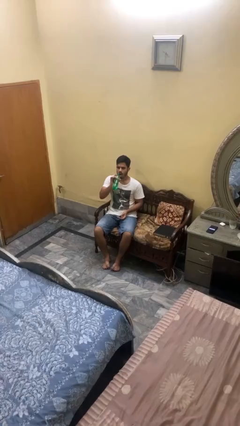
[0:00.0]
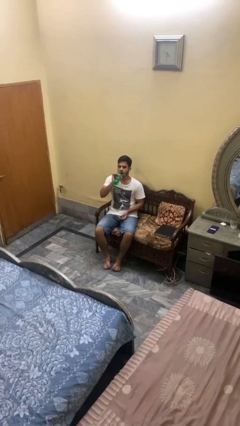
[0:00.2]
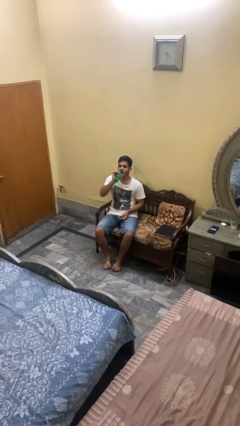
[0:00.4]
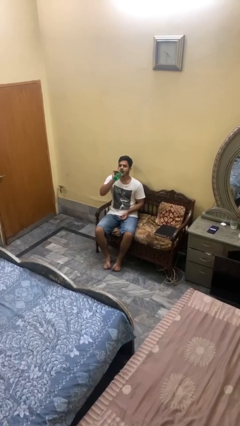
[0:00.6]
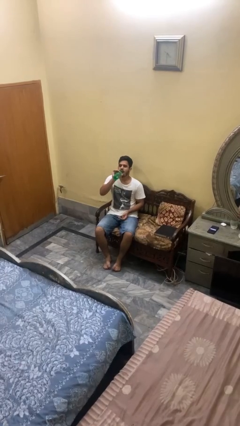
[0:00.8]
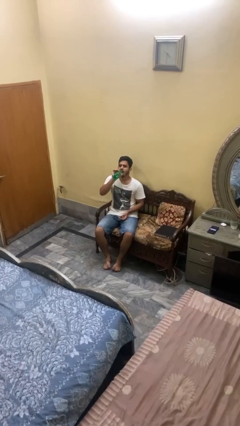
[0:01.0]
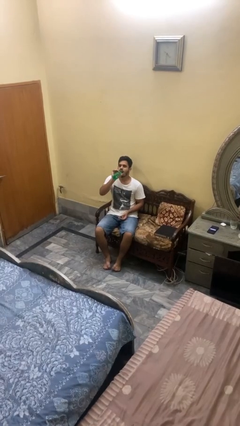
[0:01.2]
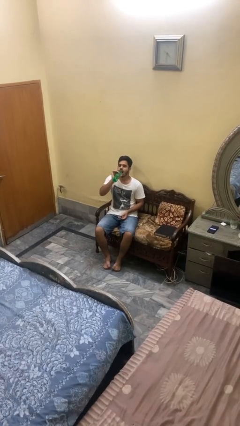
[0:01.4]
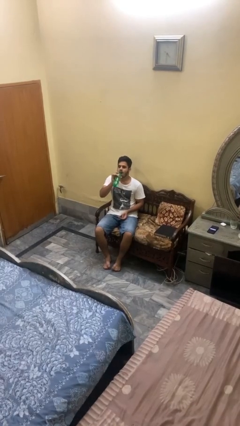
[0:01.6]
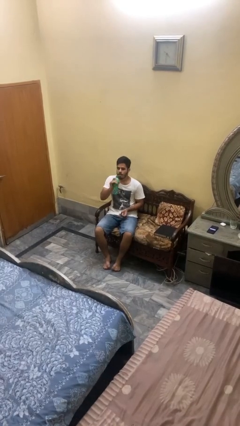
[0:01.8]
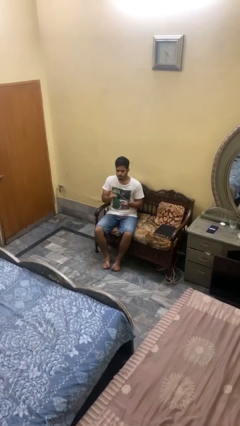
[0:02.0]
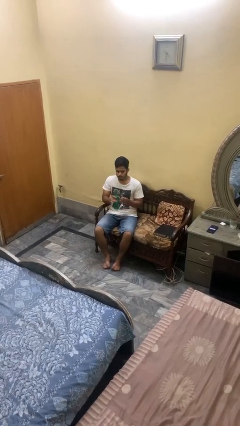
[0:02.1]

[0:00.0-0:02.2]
person drinks from bottle

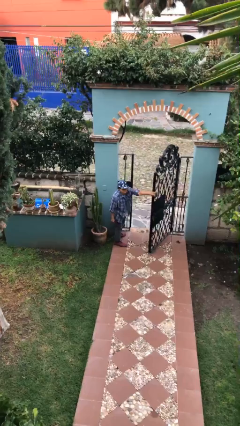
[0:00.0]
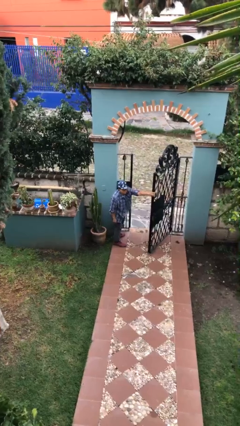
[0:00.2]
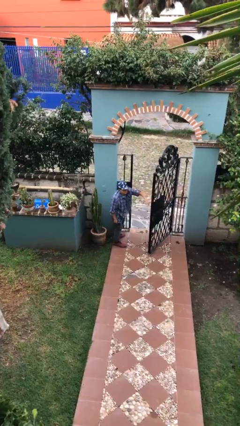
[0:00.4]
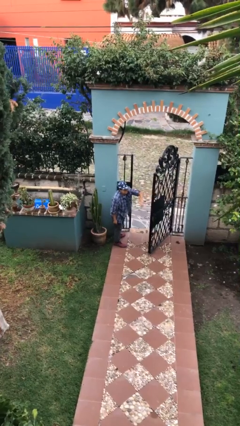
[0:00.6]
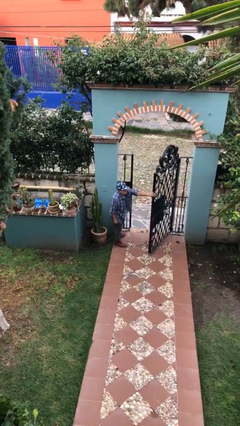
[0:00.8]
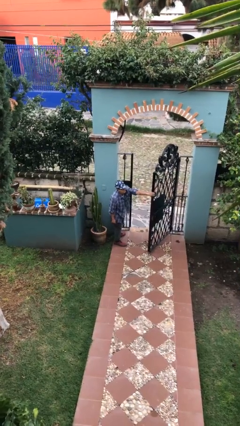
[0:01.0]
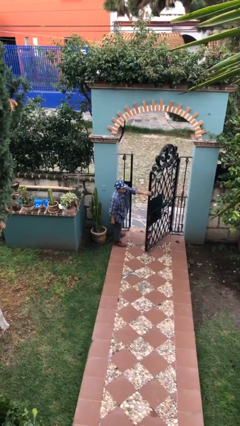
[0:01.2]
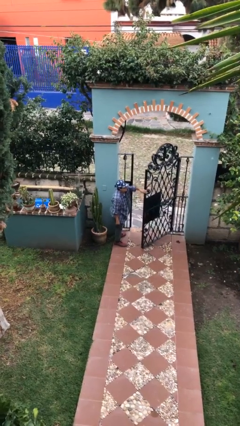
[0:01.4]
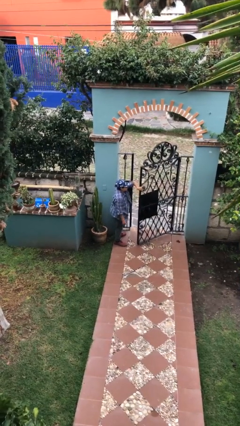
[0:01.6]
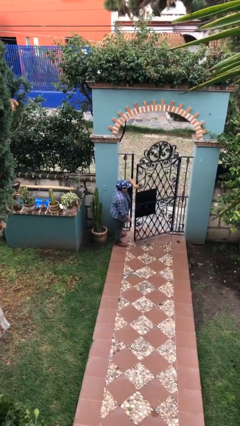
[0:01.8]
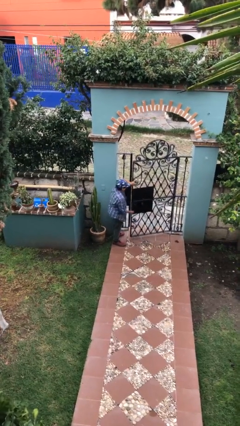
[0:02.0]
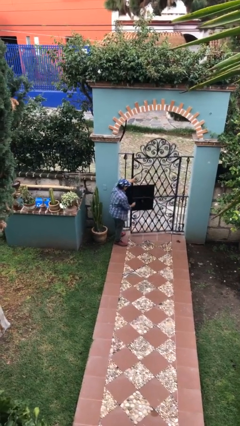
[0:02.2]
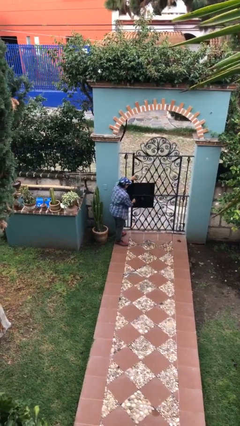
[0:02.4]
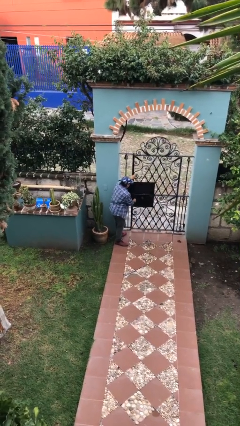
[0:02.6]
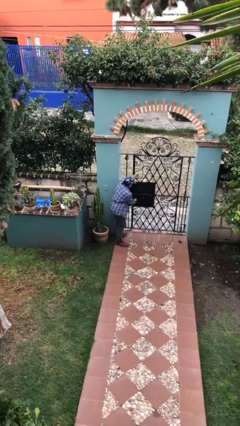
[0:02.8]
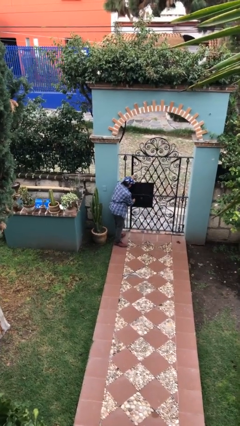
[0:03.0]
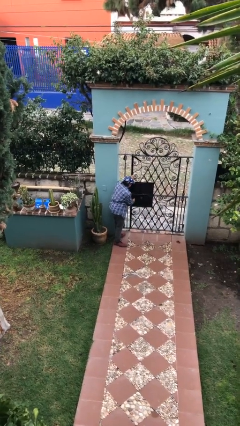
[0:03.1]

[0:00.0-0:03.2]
person closes facility door

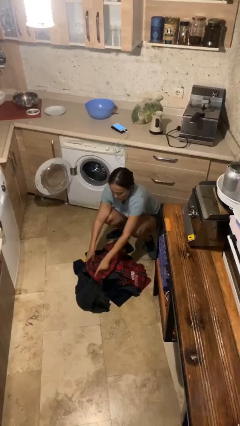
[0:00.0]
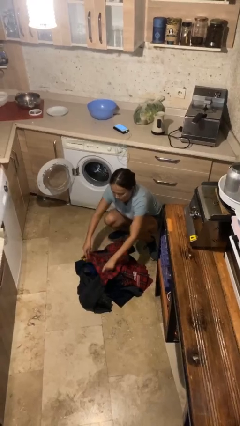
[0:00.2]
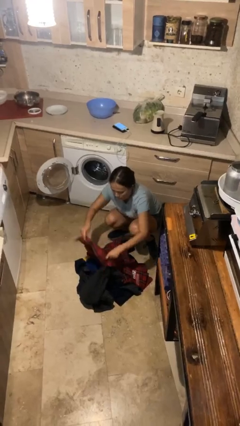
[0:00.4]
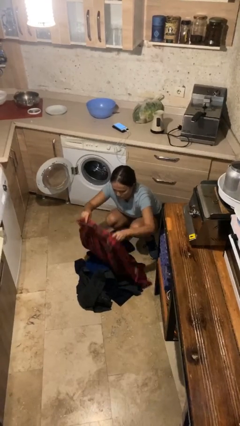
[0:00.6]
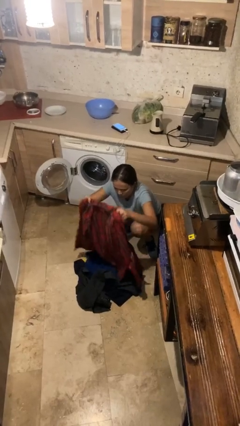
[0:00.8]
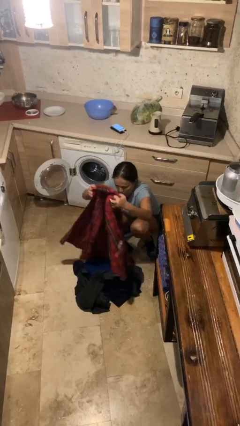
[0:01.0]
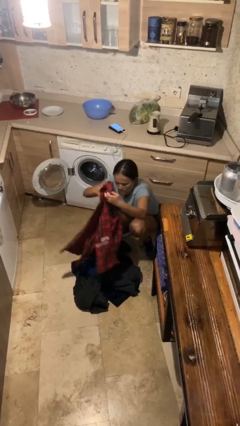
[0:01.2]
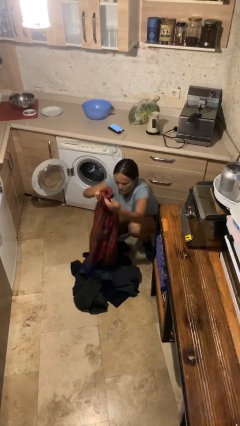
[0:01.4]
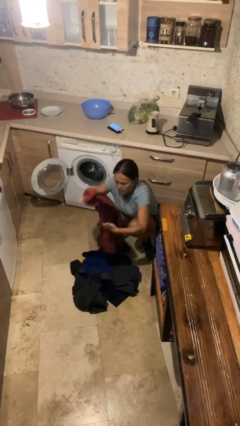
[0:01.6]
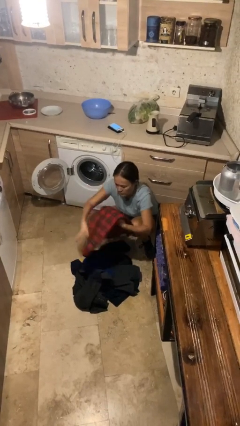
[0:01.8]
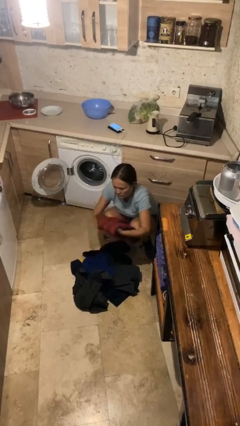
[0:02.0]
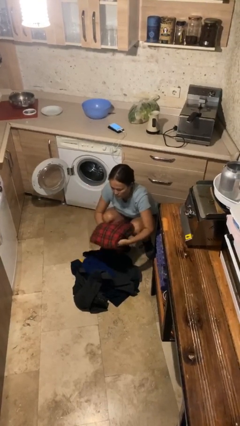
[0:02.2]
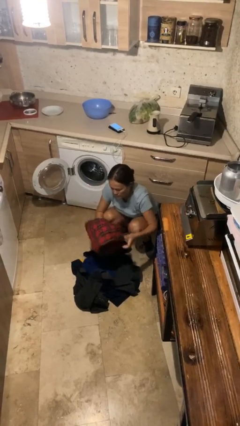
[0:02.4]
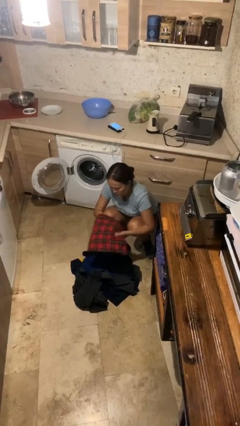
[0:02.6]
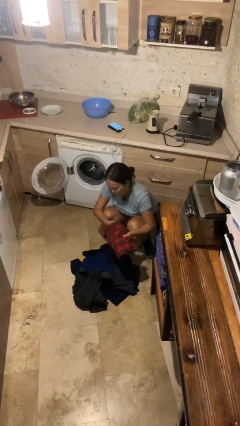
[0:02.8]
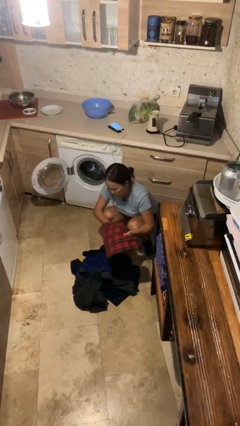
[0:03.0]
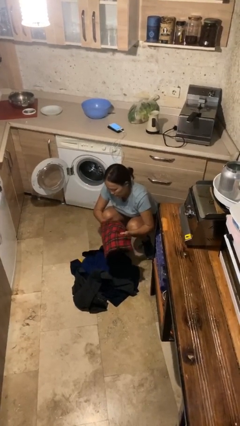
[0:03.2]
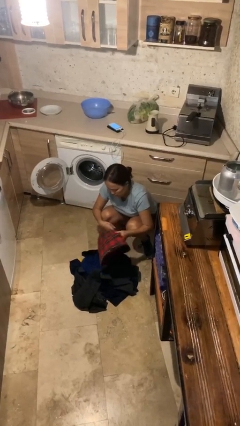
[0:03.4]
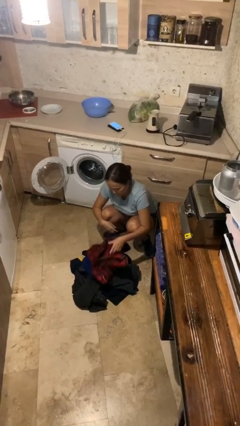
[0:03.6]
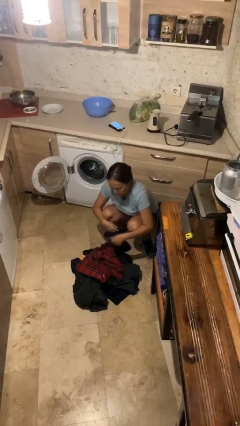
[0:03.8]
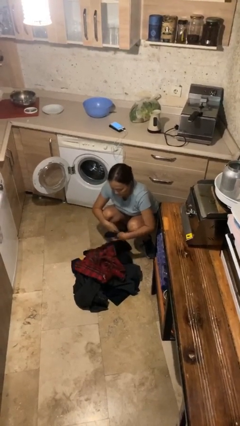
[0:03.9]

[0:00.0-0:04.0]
person folds shirt

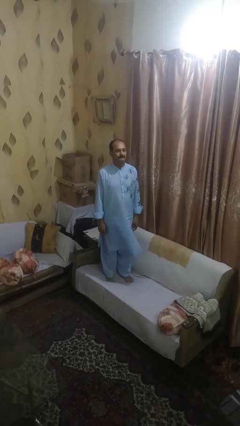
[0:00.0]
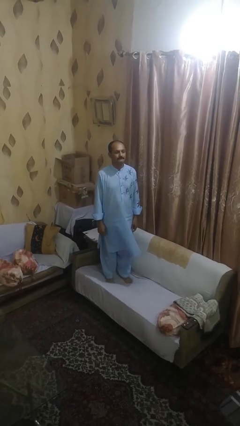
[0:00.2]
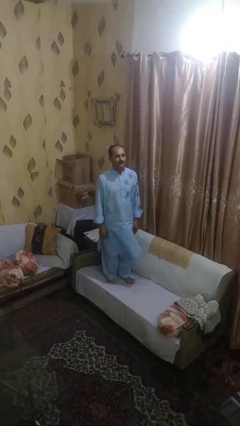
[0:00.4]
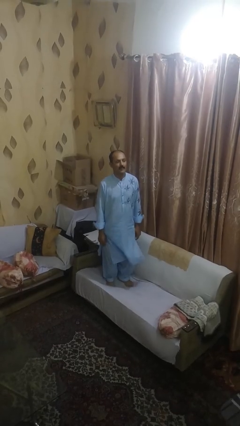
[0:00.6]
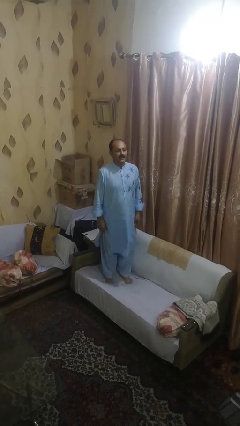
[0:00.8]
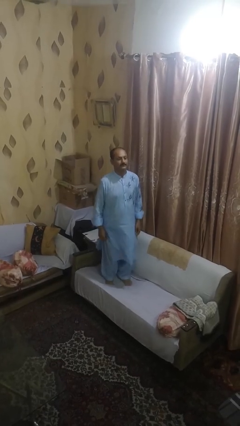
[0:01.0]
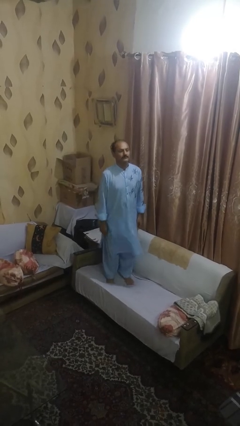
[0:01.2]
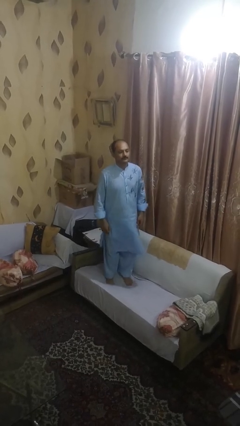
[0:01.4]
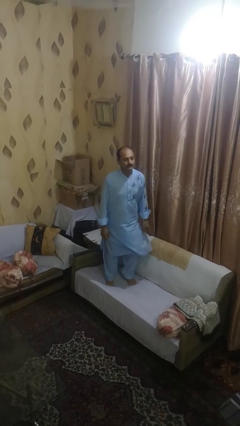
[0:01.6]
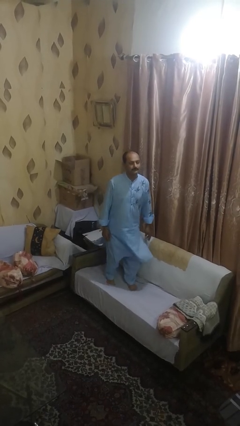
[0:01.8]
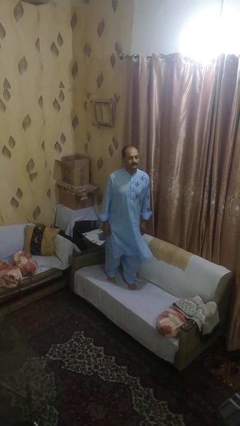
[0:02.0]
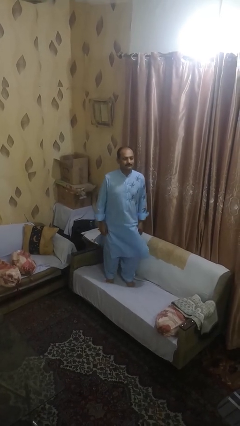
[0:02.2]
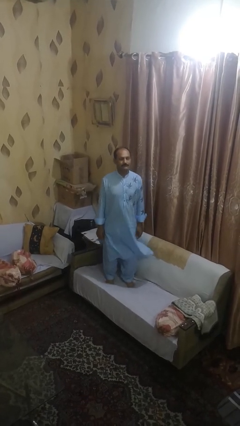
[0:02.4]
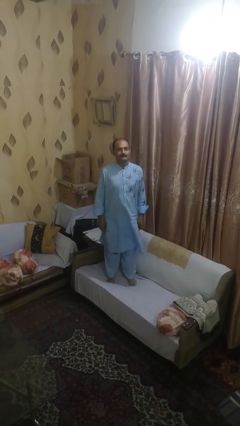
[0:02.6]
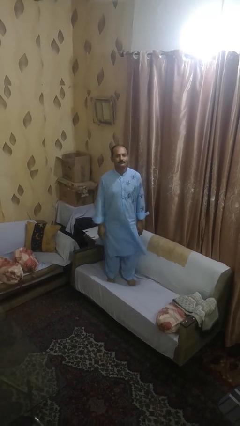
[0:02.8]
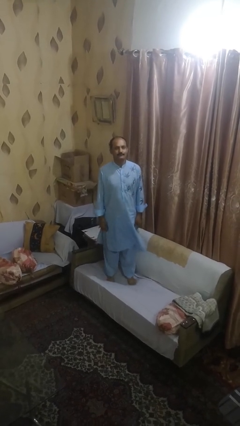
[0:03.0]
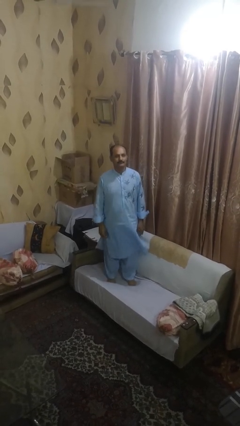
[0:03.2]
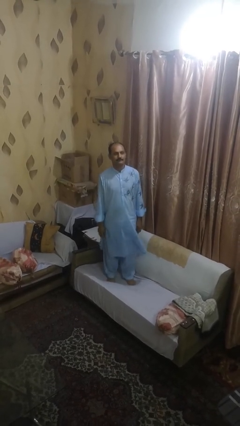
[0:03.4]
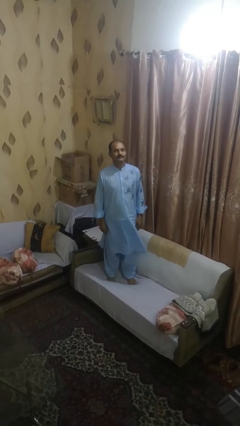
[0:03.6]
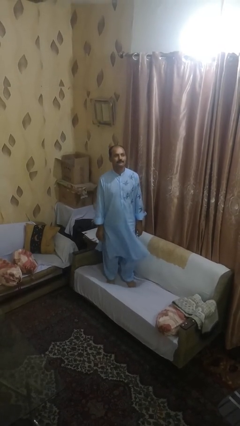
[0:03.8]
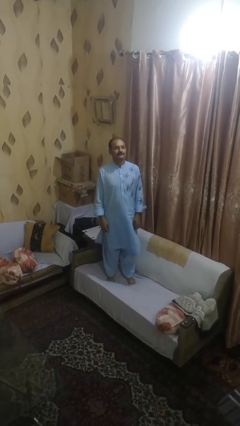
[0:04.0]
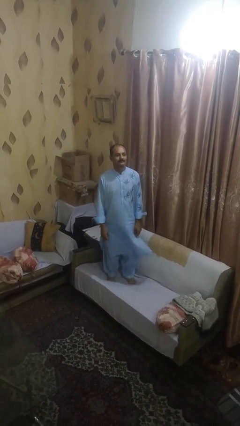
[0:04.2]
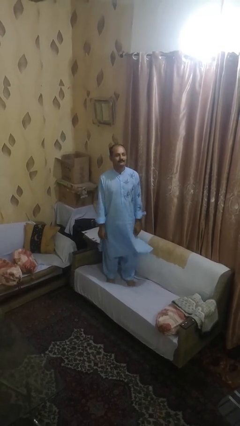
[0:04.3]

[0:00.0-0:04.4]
person jumps on couch

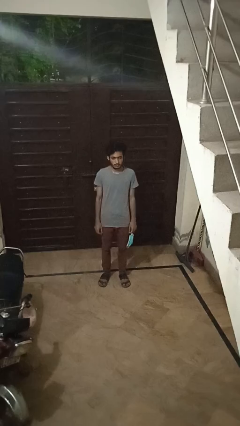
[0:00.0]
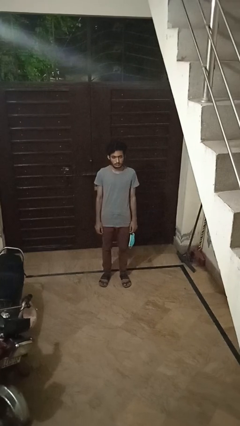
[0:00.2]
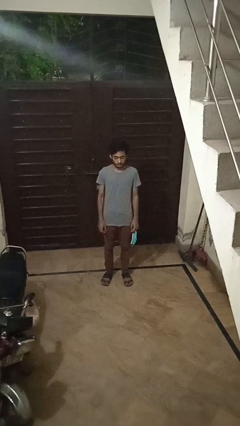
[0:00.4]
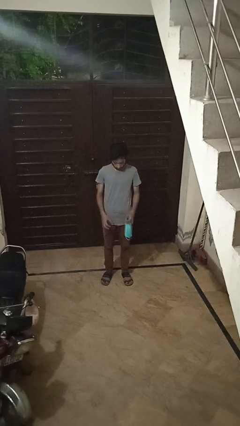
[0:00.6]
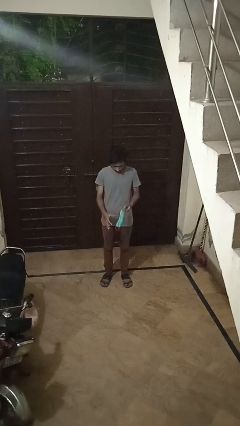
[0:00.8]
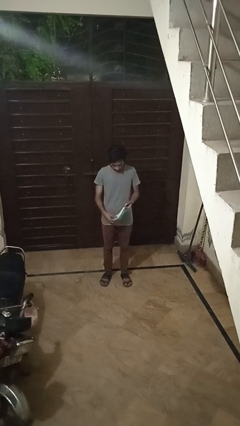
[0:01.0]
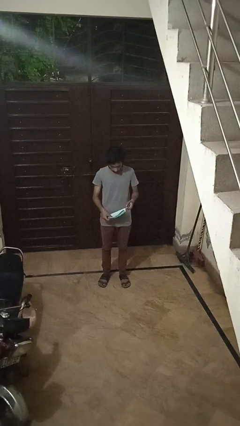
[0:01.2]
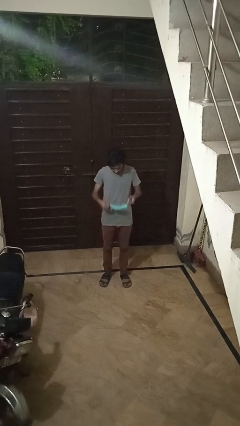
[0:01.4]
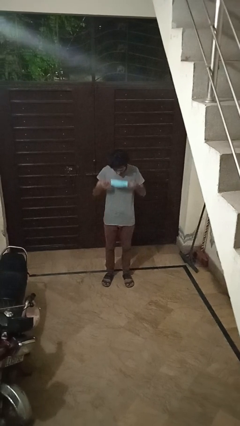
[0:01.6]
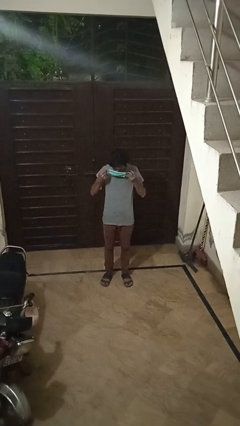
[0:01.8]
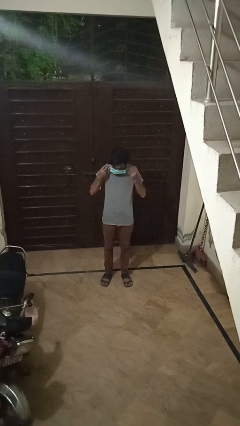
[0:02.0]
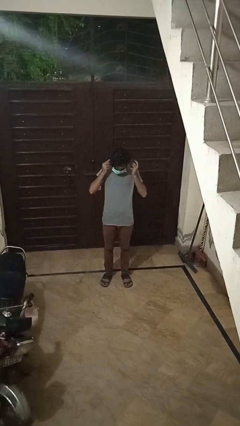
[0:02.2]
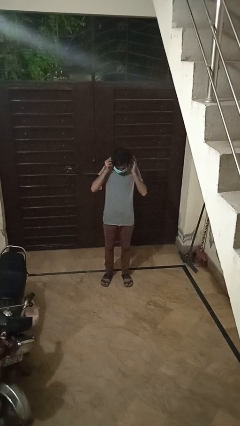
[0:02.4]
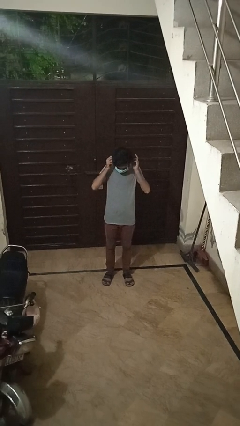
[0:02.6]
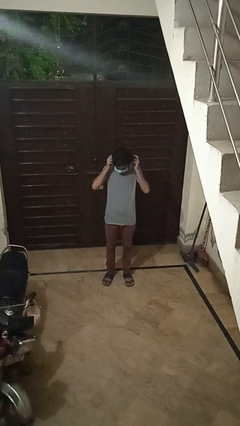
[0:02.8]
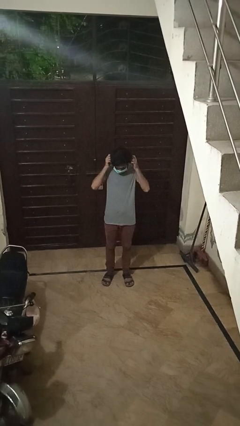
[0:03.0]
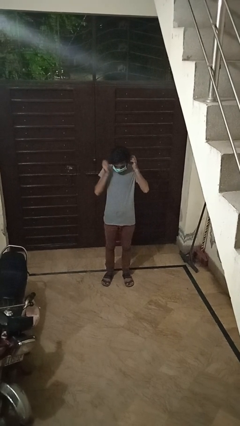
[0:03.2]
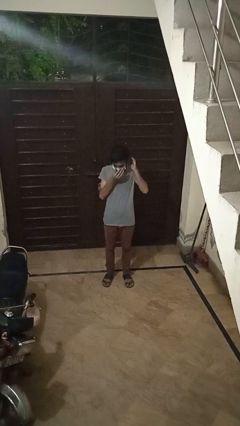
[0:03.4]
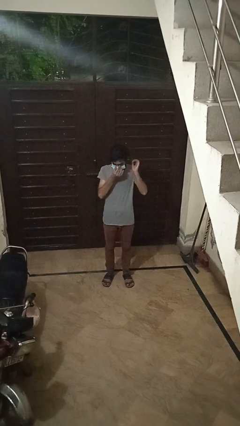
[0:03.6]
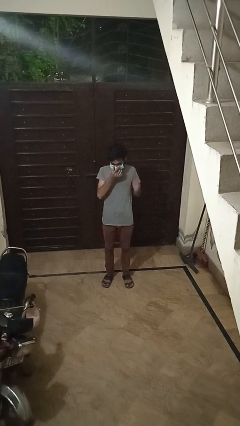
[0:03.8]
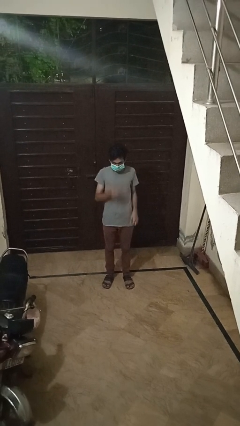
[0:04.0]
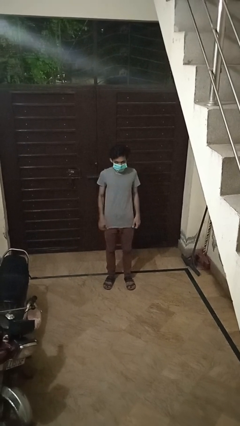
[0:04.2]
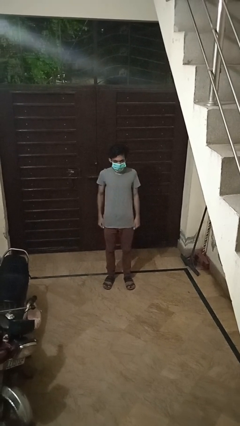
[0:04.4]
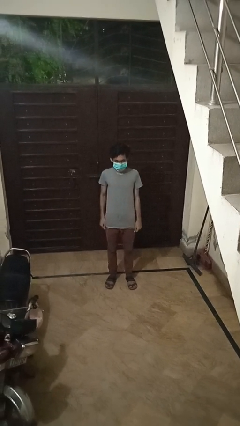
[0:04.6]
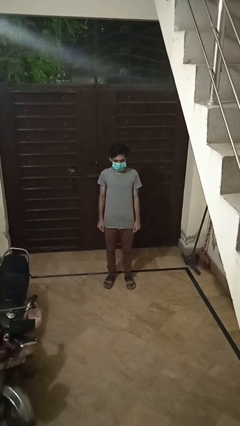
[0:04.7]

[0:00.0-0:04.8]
person puts on facemask
